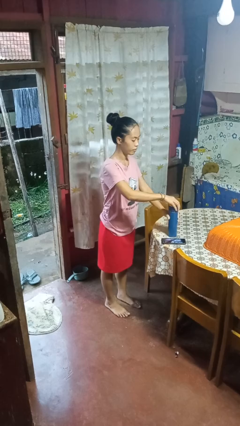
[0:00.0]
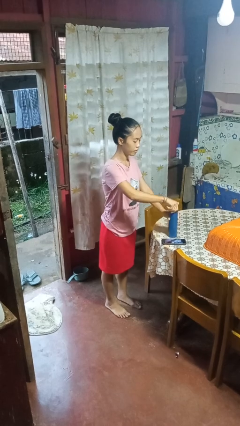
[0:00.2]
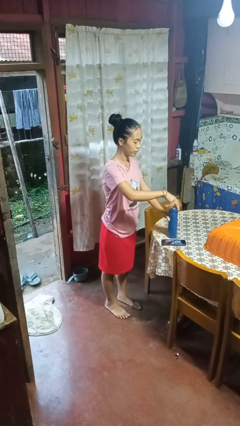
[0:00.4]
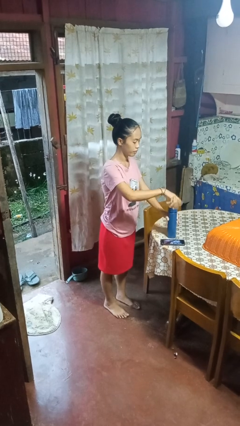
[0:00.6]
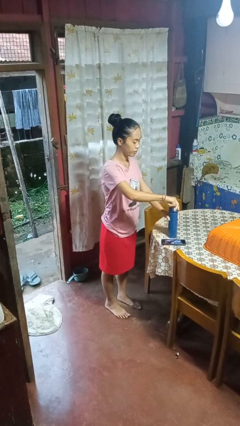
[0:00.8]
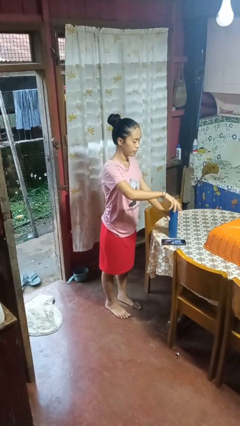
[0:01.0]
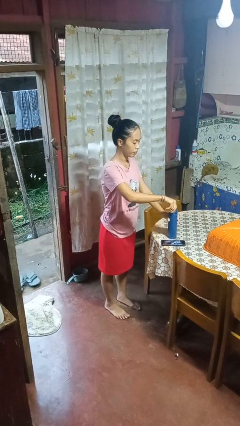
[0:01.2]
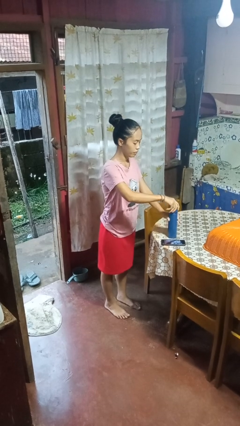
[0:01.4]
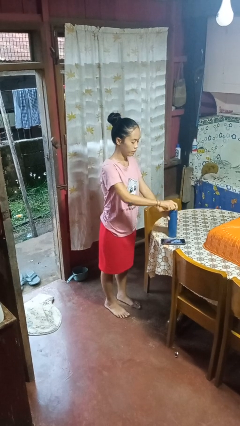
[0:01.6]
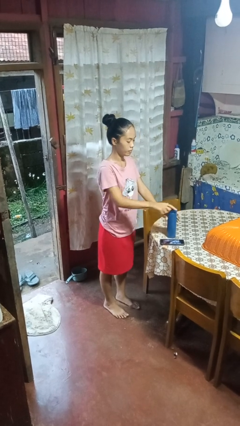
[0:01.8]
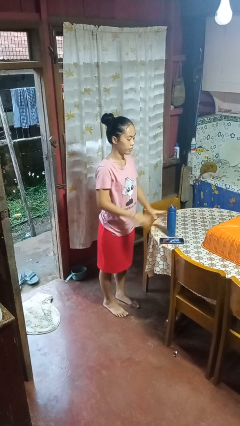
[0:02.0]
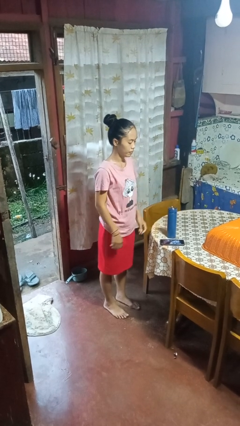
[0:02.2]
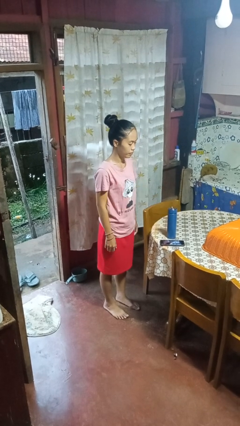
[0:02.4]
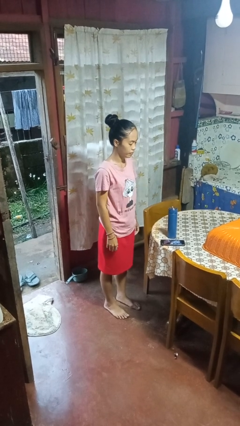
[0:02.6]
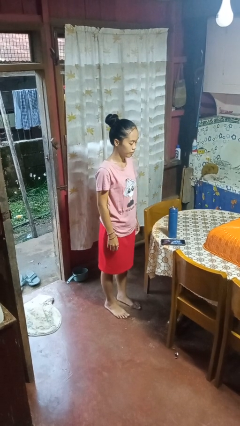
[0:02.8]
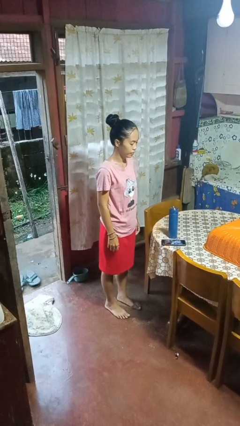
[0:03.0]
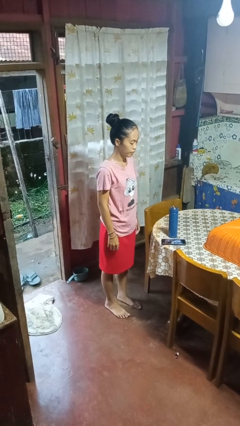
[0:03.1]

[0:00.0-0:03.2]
person closes jar

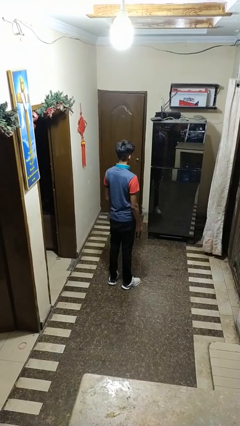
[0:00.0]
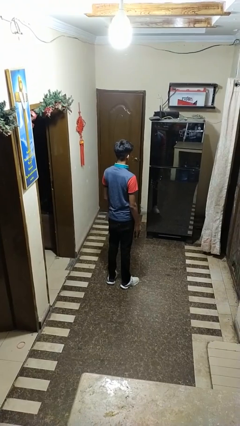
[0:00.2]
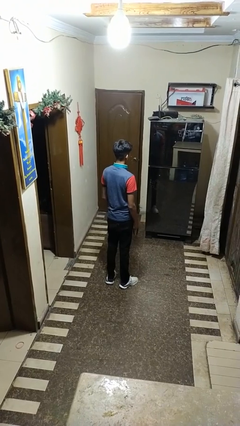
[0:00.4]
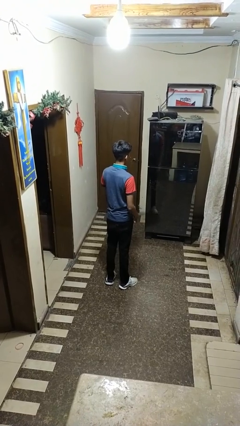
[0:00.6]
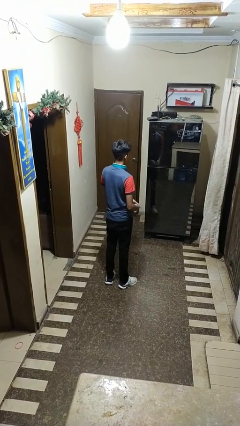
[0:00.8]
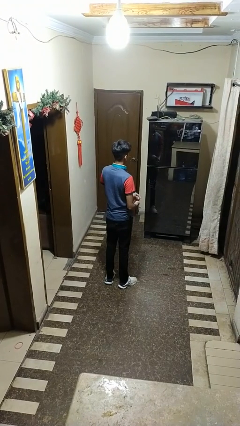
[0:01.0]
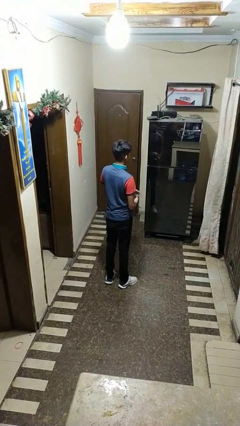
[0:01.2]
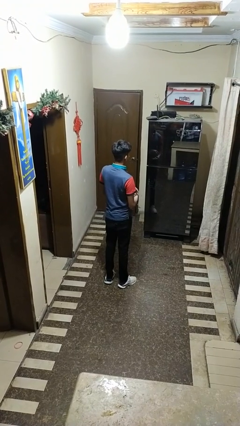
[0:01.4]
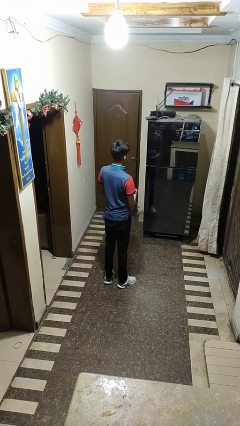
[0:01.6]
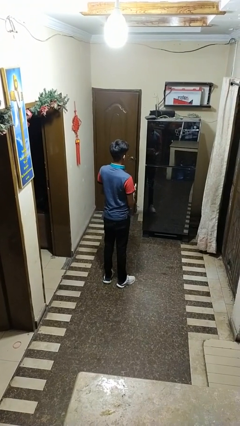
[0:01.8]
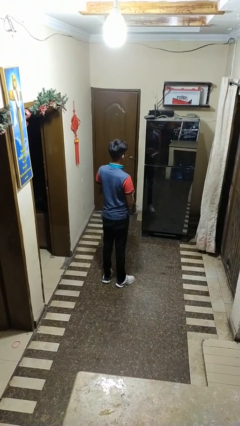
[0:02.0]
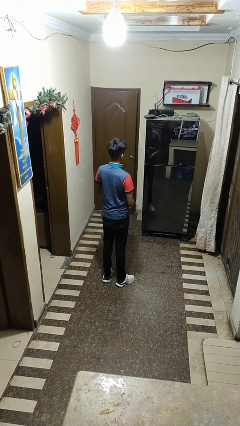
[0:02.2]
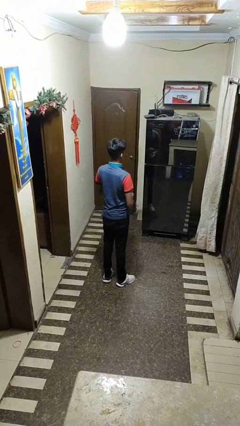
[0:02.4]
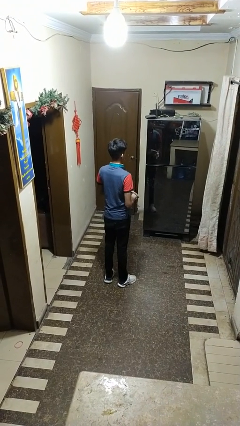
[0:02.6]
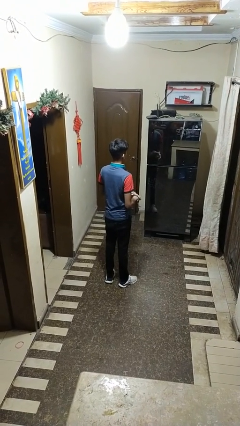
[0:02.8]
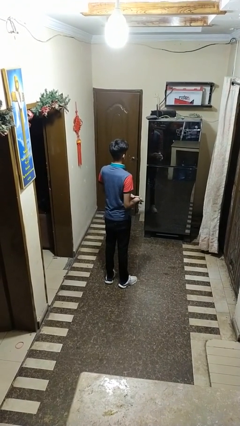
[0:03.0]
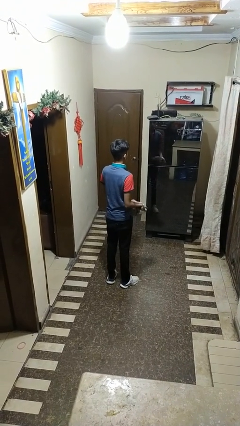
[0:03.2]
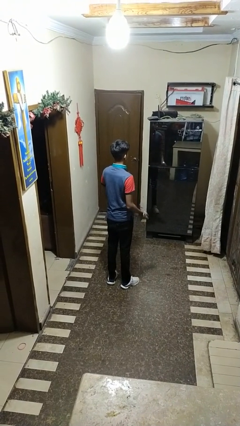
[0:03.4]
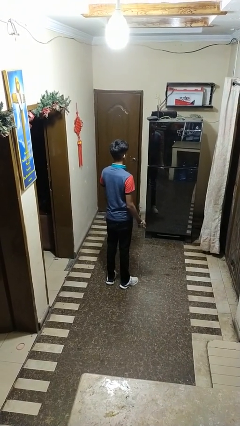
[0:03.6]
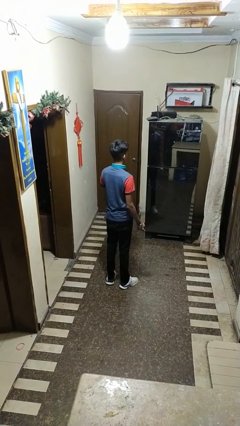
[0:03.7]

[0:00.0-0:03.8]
person puts on wristwatch

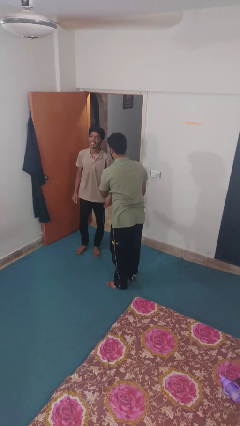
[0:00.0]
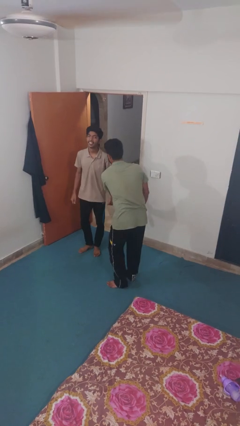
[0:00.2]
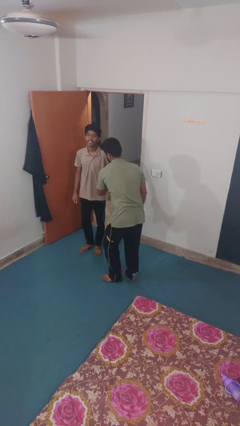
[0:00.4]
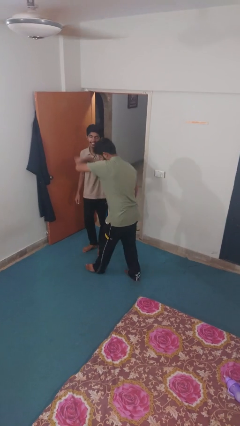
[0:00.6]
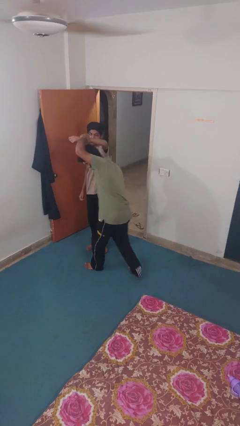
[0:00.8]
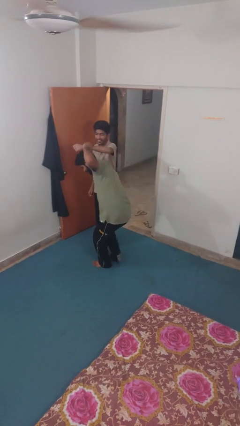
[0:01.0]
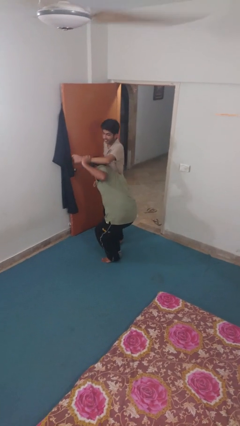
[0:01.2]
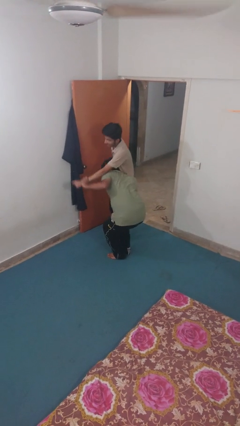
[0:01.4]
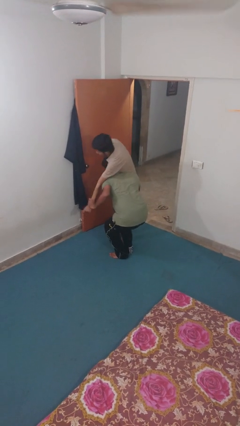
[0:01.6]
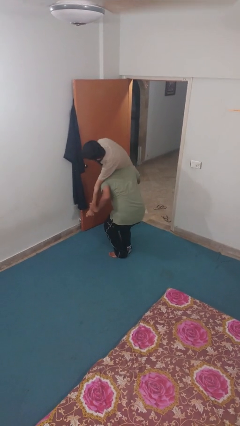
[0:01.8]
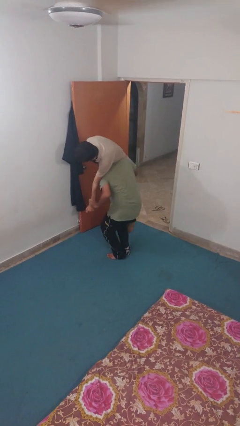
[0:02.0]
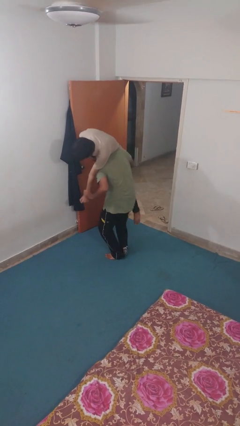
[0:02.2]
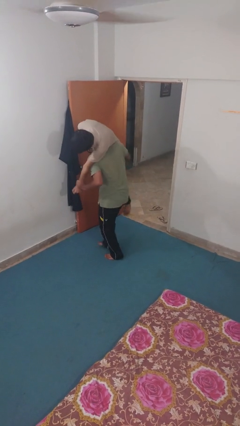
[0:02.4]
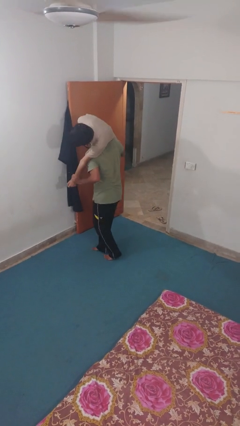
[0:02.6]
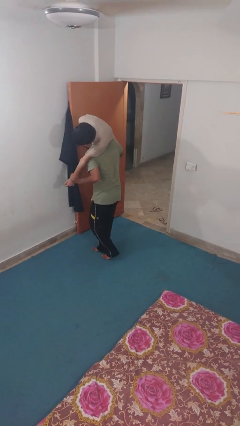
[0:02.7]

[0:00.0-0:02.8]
person carries person over shoulder

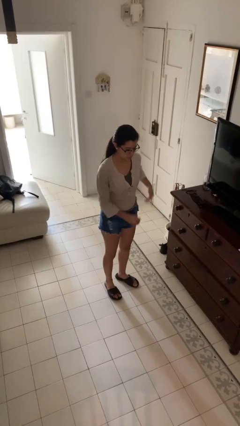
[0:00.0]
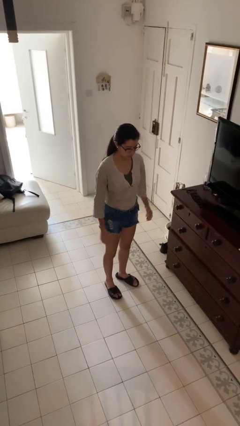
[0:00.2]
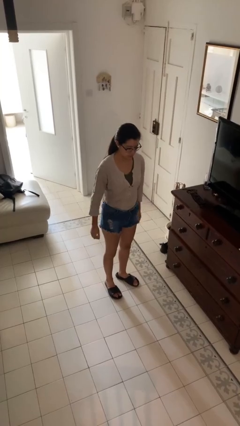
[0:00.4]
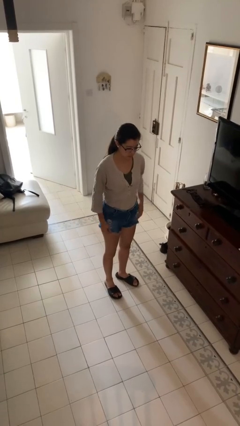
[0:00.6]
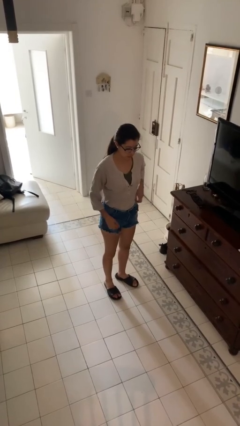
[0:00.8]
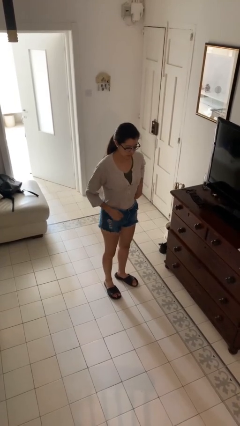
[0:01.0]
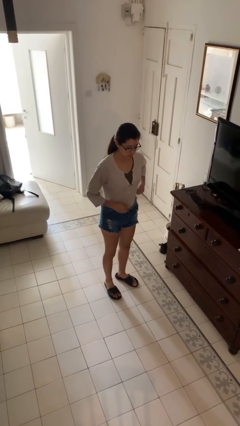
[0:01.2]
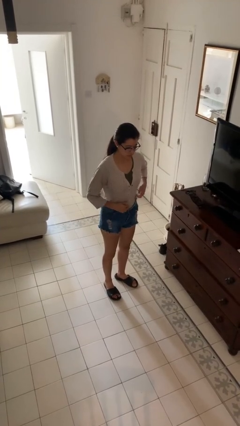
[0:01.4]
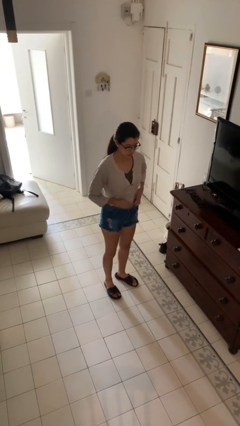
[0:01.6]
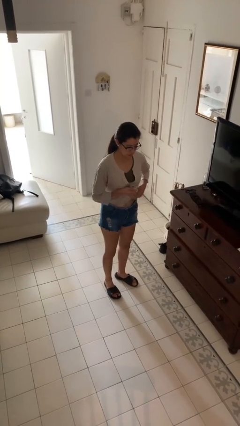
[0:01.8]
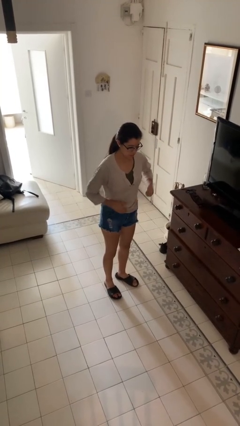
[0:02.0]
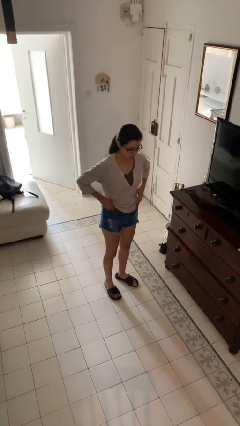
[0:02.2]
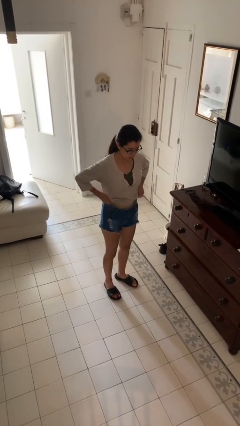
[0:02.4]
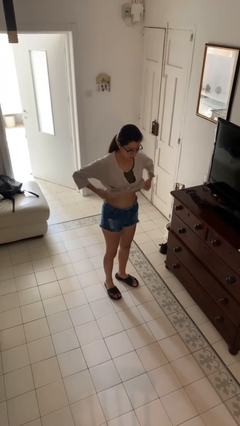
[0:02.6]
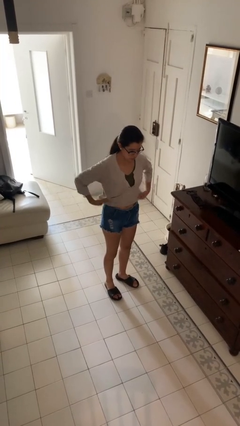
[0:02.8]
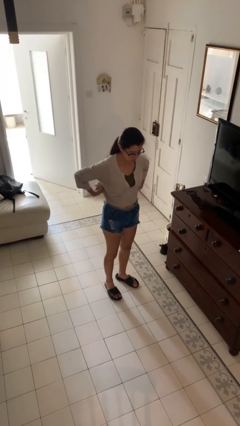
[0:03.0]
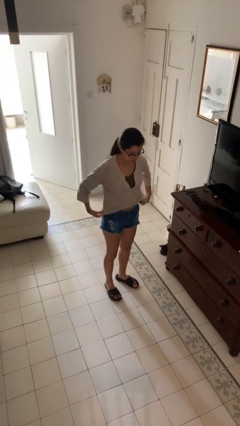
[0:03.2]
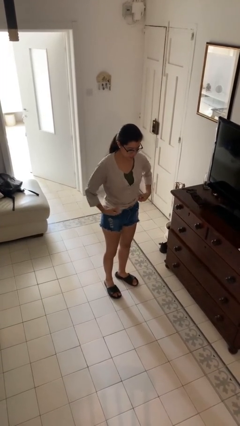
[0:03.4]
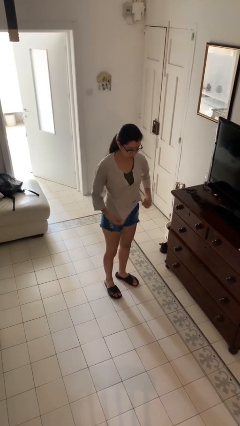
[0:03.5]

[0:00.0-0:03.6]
person untucks shirt

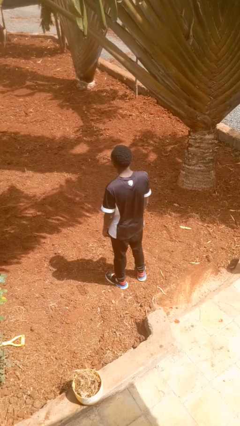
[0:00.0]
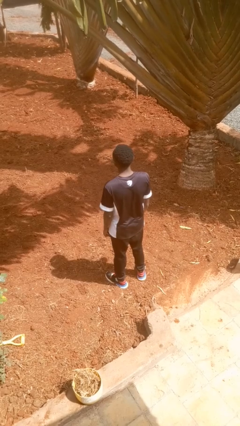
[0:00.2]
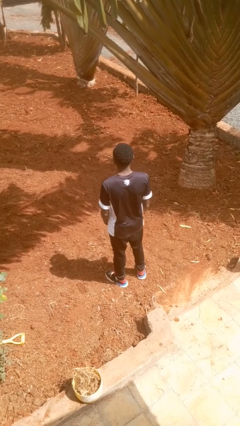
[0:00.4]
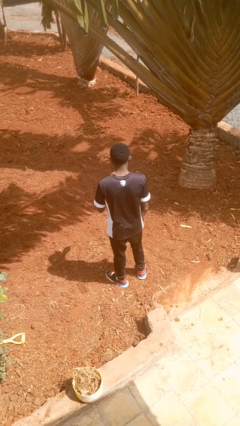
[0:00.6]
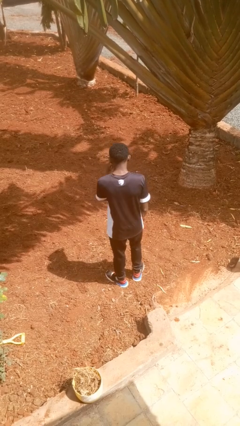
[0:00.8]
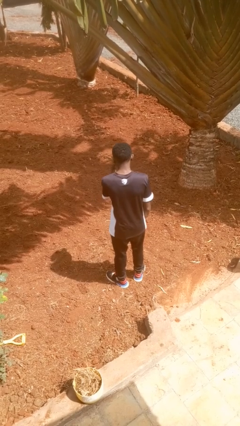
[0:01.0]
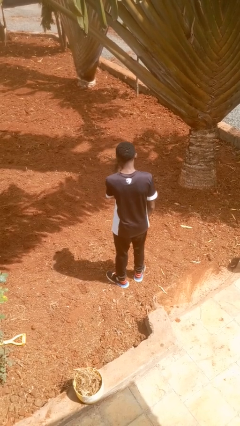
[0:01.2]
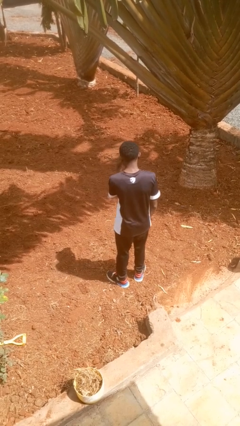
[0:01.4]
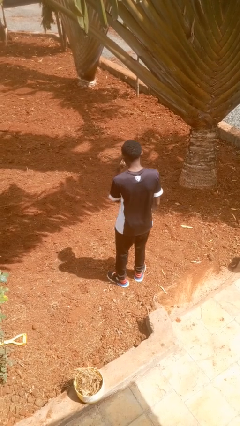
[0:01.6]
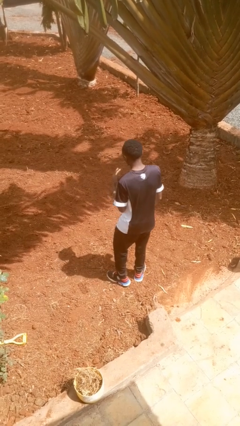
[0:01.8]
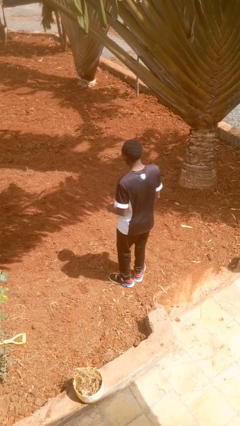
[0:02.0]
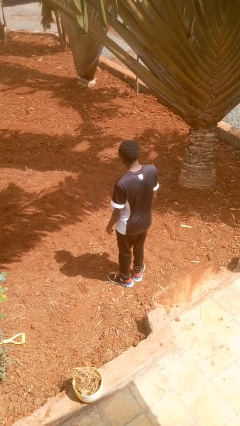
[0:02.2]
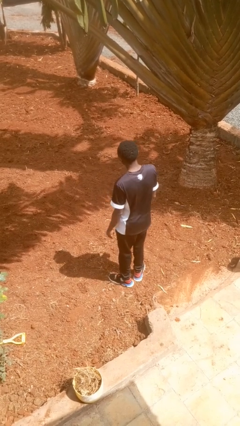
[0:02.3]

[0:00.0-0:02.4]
person gestures watch closely

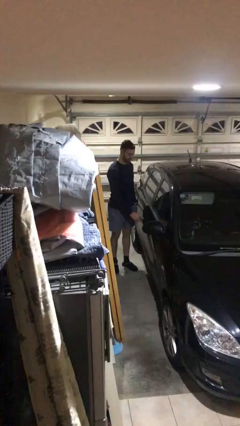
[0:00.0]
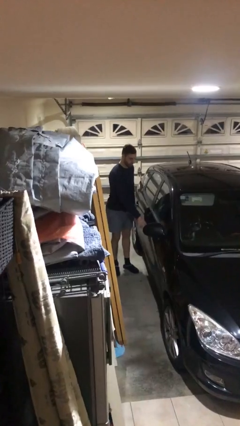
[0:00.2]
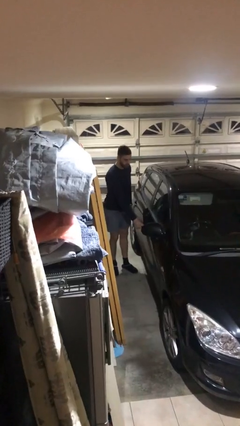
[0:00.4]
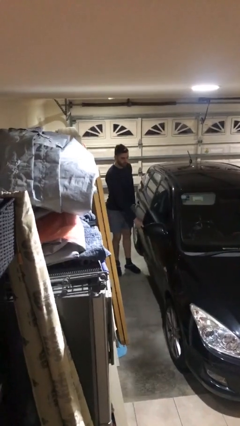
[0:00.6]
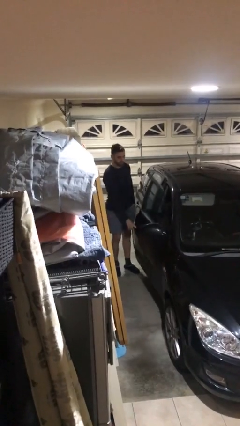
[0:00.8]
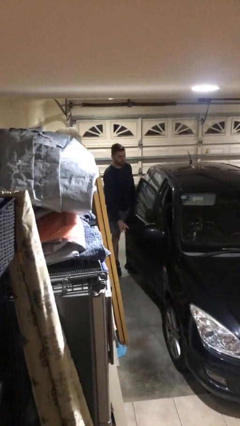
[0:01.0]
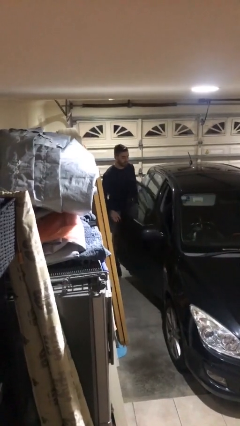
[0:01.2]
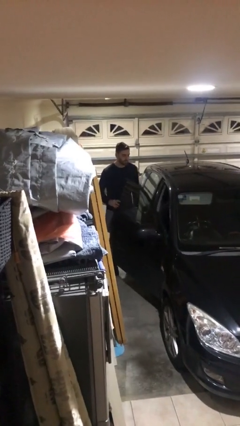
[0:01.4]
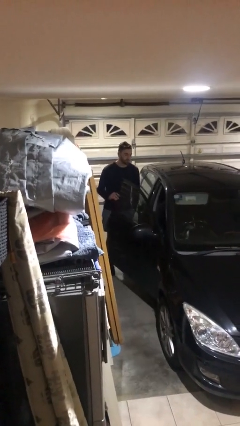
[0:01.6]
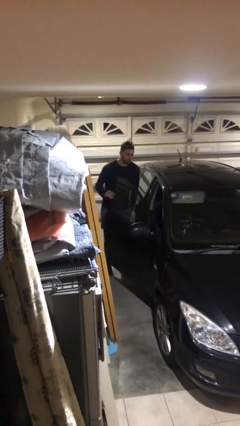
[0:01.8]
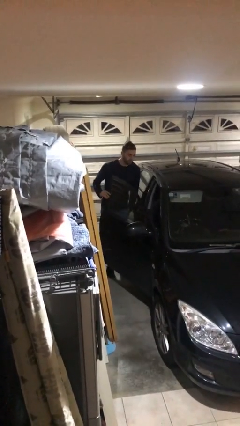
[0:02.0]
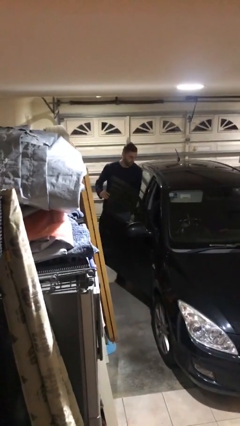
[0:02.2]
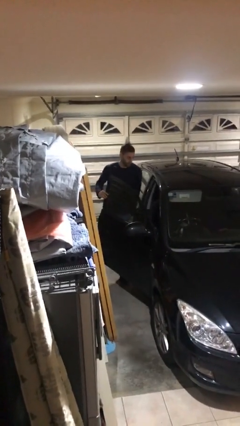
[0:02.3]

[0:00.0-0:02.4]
person opens car door
